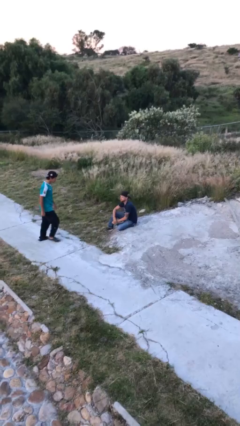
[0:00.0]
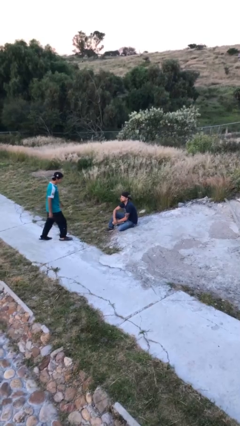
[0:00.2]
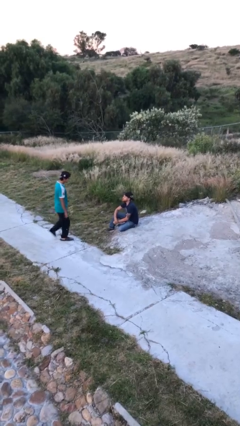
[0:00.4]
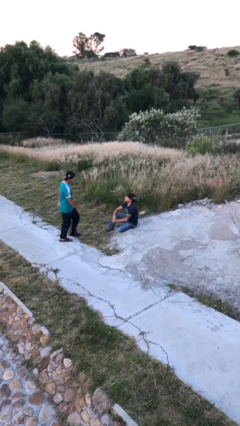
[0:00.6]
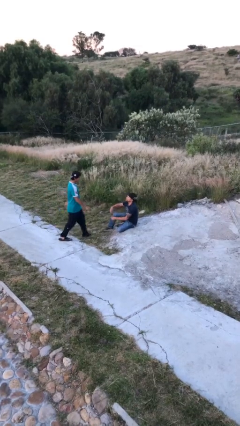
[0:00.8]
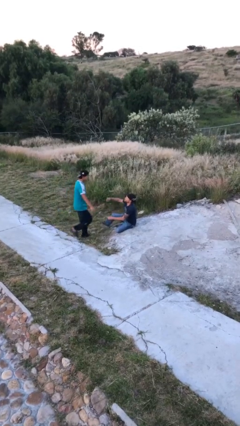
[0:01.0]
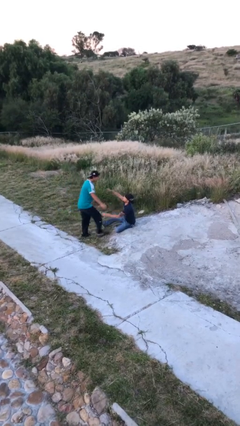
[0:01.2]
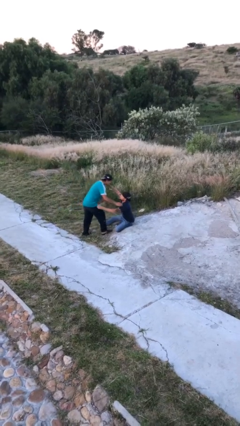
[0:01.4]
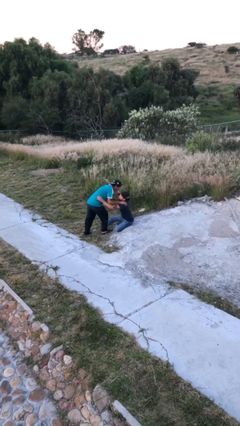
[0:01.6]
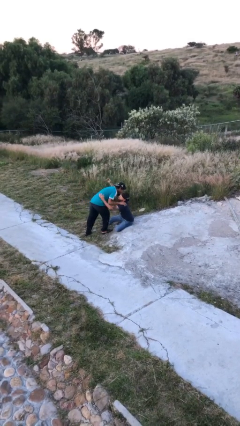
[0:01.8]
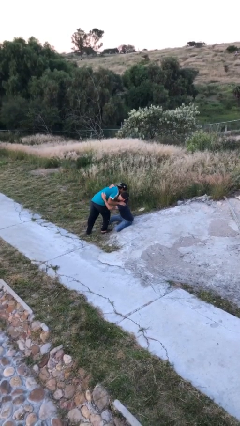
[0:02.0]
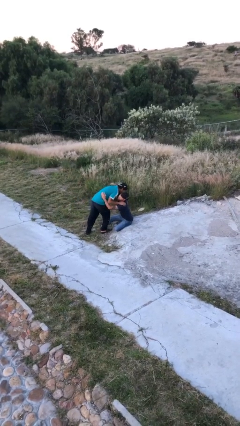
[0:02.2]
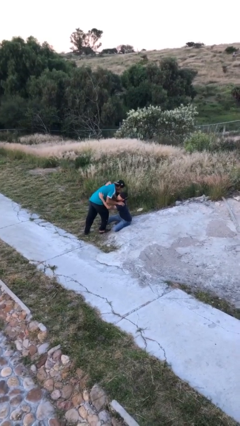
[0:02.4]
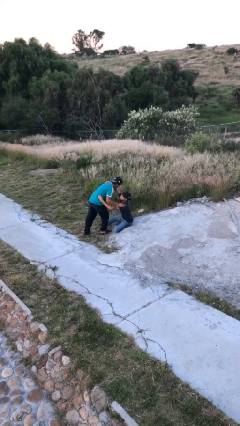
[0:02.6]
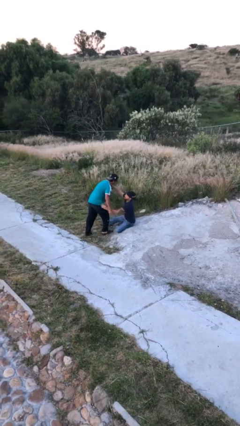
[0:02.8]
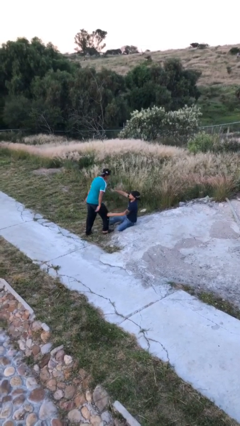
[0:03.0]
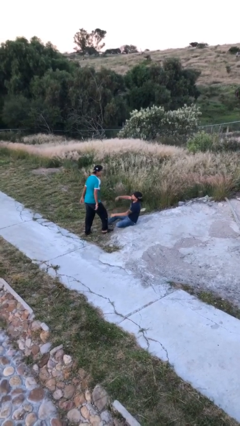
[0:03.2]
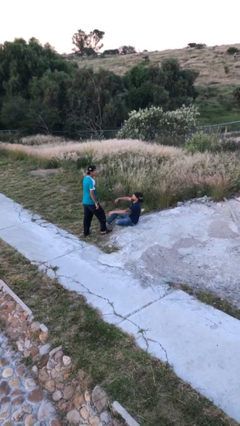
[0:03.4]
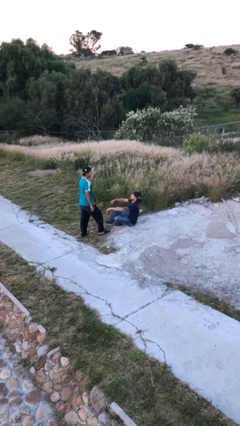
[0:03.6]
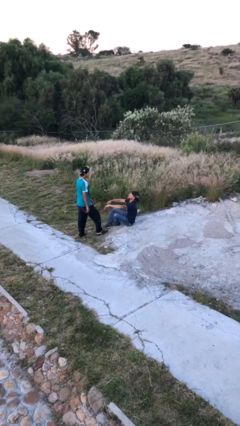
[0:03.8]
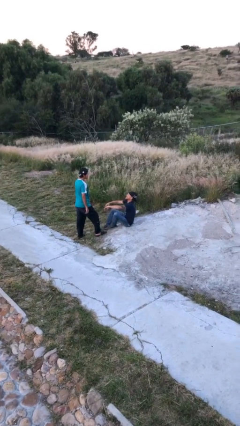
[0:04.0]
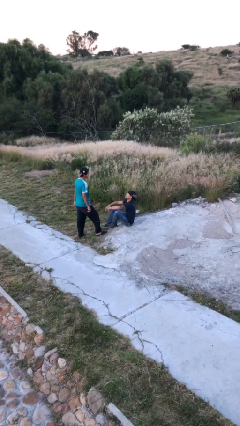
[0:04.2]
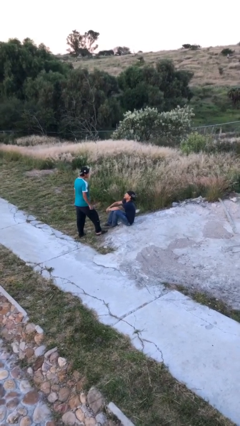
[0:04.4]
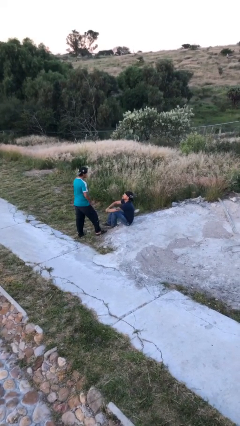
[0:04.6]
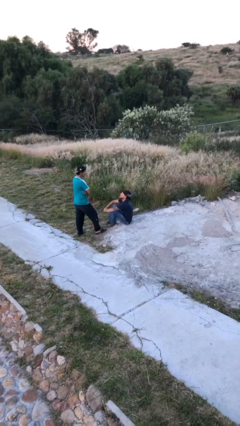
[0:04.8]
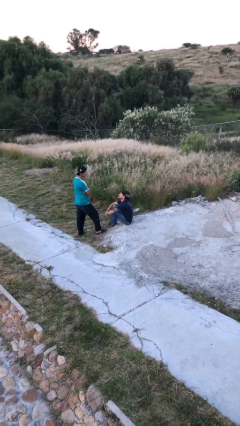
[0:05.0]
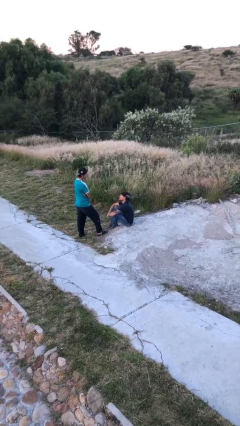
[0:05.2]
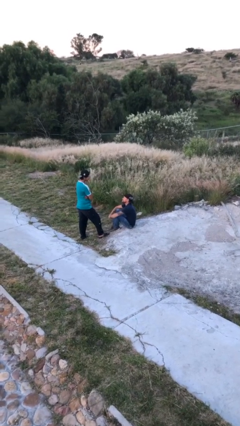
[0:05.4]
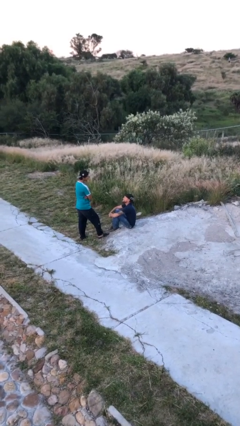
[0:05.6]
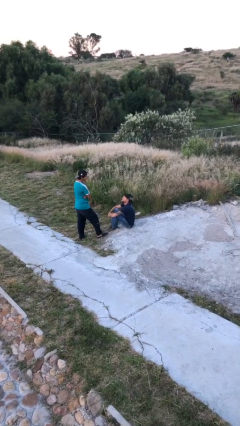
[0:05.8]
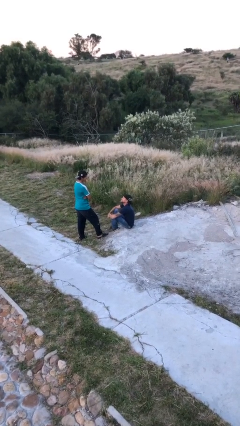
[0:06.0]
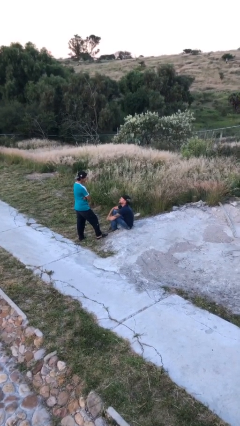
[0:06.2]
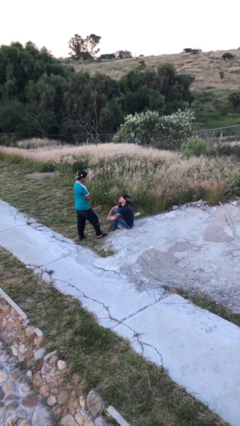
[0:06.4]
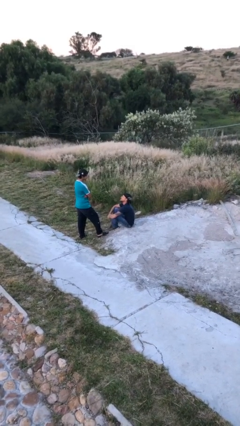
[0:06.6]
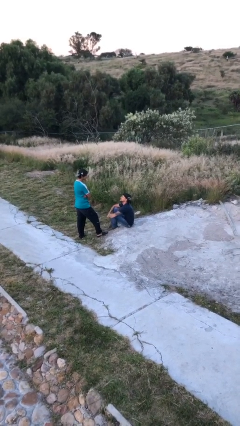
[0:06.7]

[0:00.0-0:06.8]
person embraces person

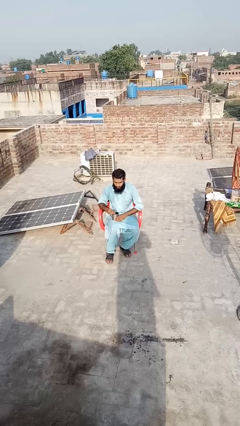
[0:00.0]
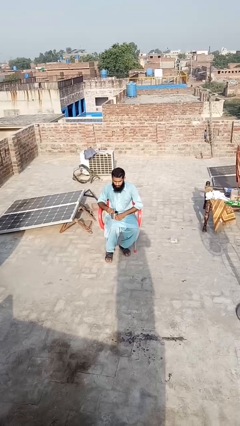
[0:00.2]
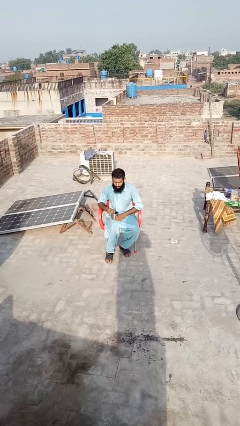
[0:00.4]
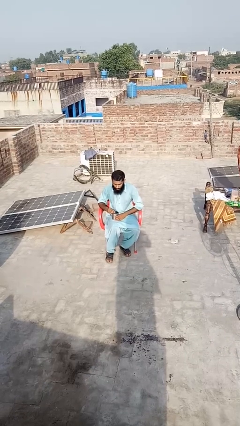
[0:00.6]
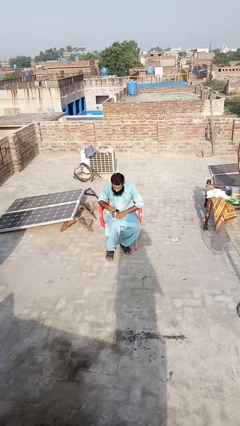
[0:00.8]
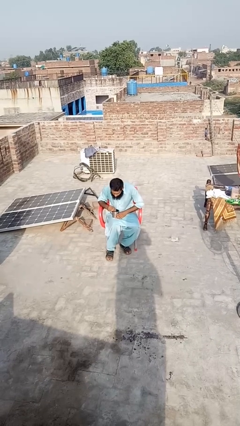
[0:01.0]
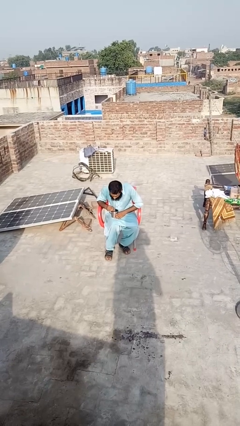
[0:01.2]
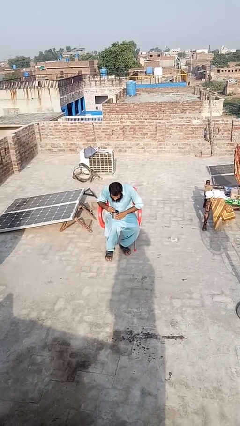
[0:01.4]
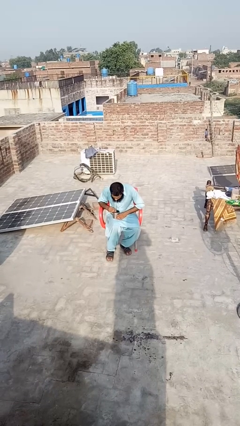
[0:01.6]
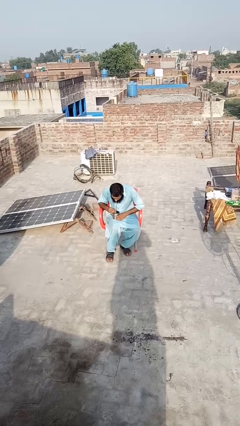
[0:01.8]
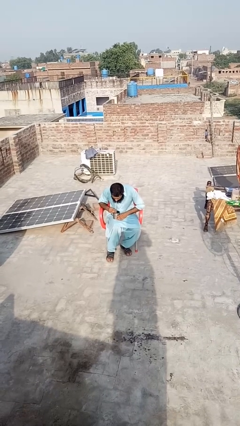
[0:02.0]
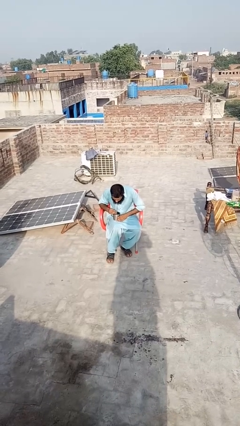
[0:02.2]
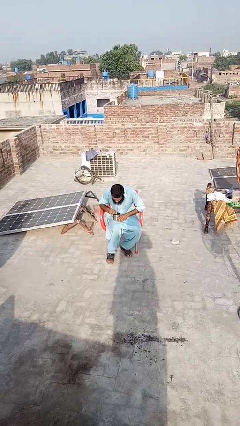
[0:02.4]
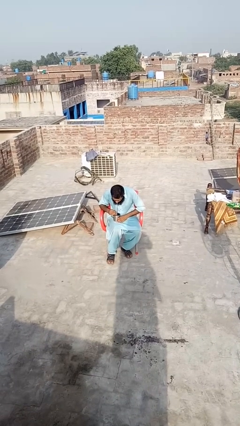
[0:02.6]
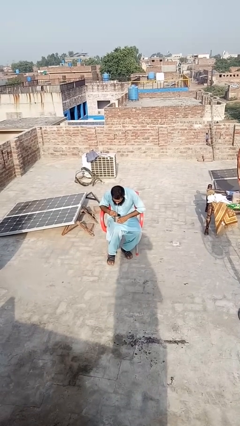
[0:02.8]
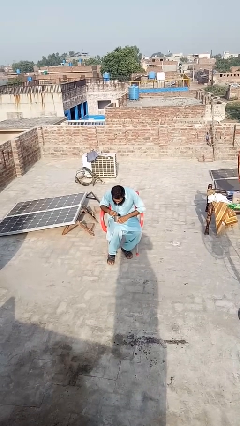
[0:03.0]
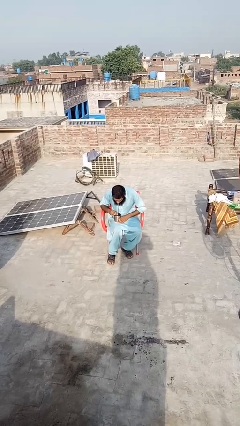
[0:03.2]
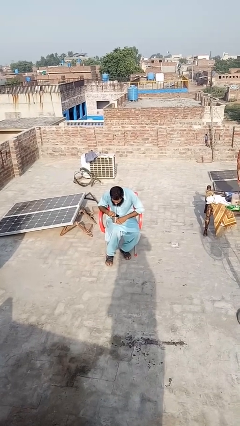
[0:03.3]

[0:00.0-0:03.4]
person drinks from straw

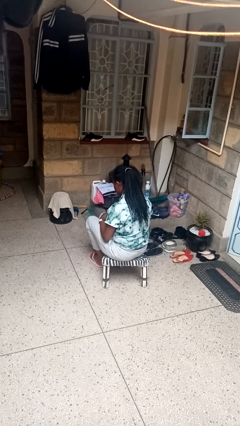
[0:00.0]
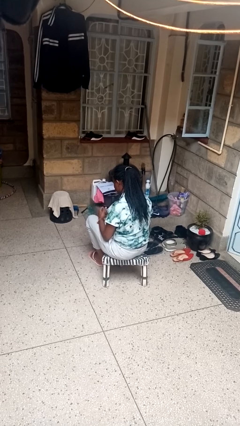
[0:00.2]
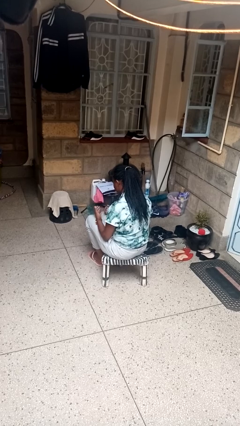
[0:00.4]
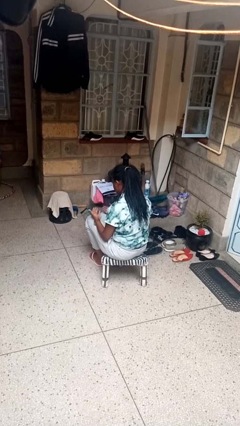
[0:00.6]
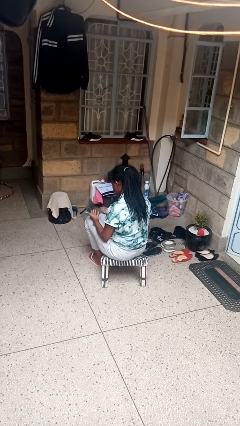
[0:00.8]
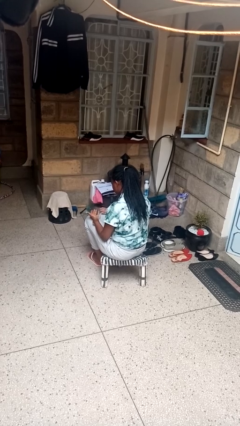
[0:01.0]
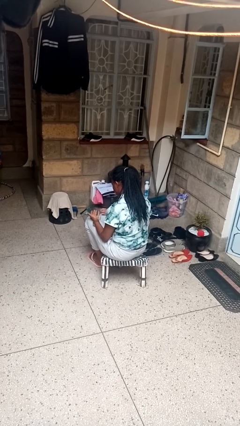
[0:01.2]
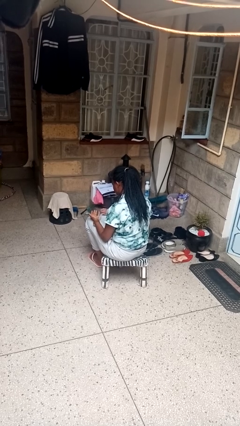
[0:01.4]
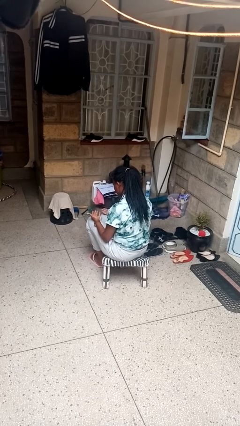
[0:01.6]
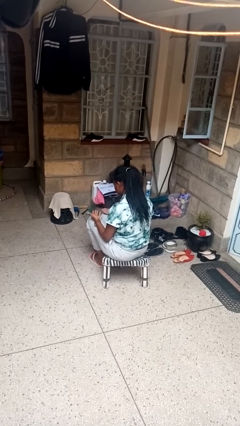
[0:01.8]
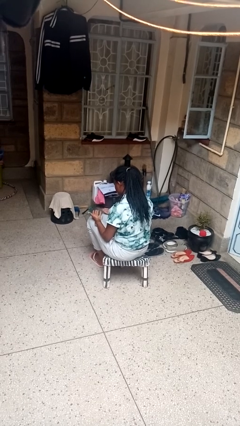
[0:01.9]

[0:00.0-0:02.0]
person looks at hands in lap

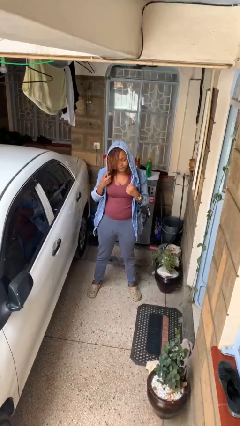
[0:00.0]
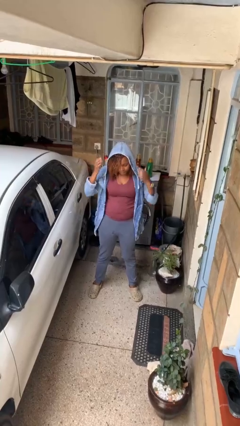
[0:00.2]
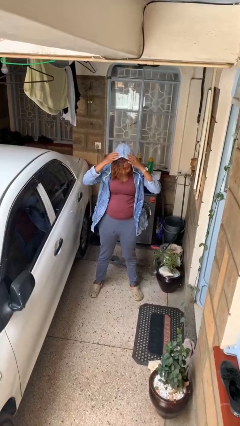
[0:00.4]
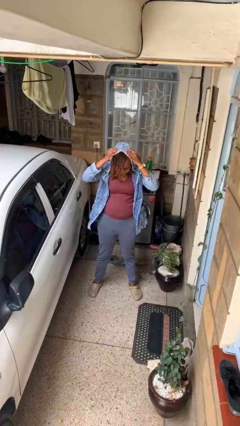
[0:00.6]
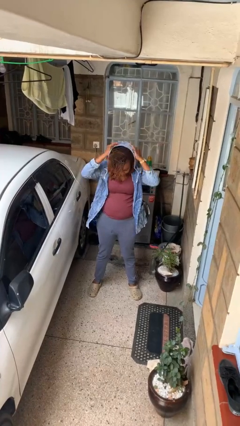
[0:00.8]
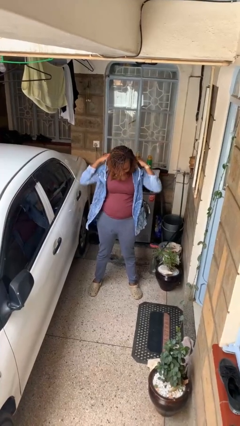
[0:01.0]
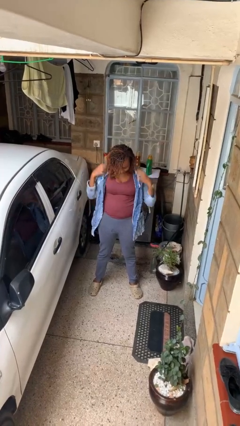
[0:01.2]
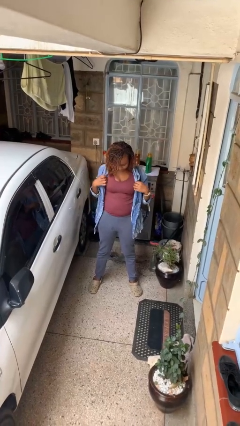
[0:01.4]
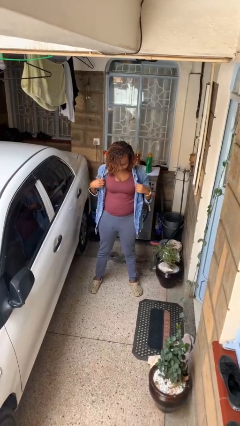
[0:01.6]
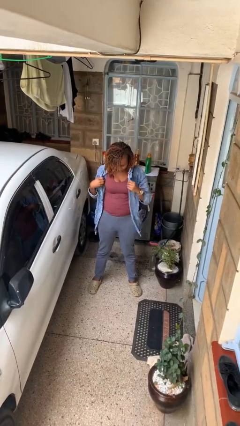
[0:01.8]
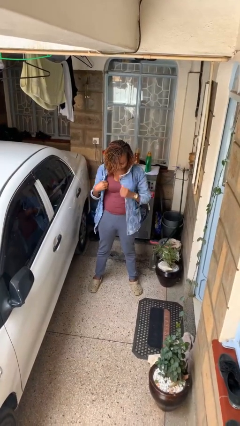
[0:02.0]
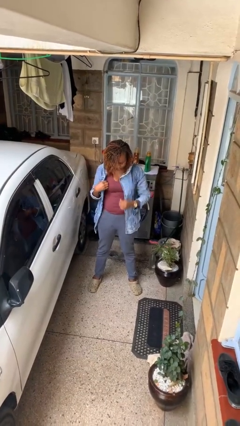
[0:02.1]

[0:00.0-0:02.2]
person takes off hoodie

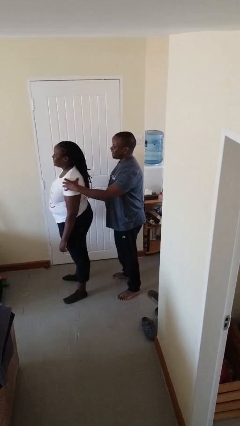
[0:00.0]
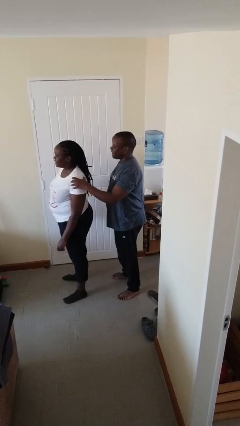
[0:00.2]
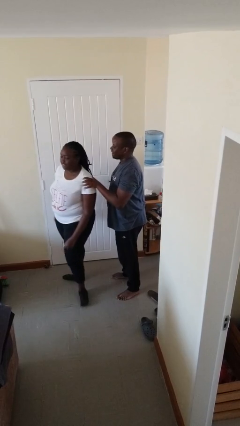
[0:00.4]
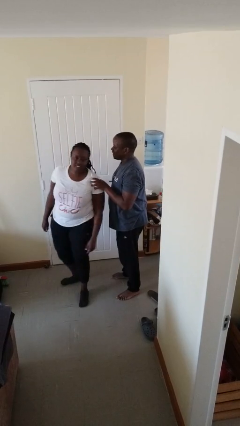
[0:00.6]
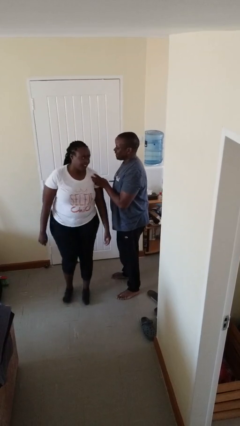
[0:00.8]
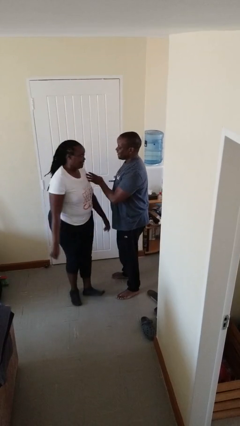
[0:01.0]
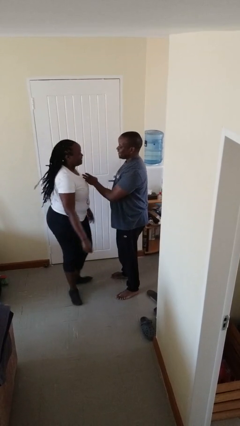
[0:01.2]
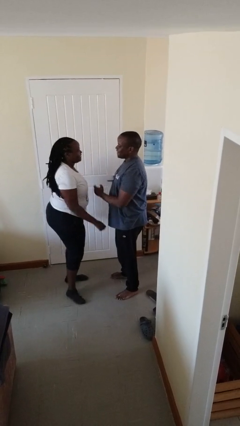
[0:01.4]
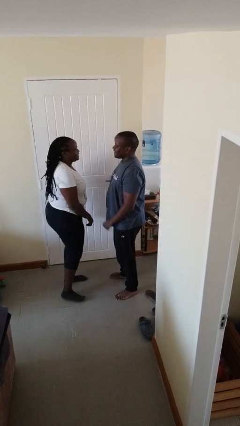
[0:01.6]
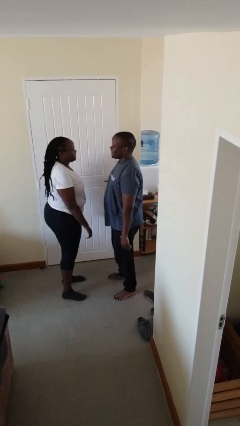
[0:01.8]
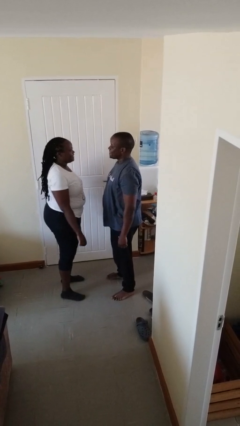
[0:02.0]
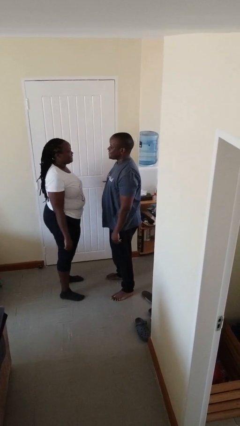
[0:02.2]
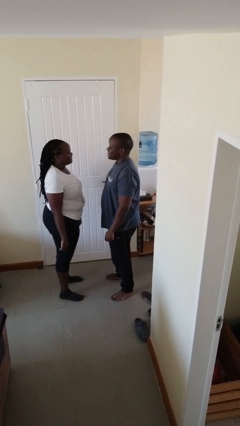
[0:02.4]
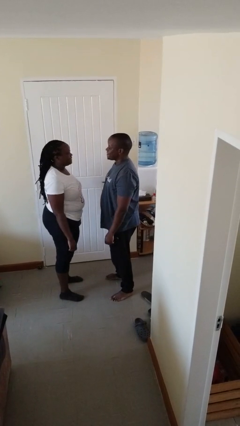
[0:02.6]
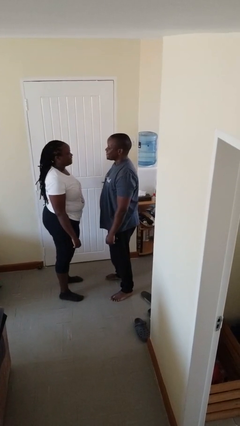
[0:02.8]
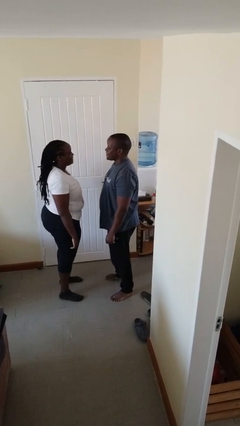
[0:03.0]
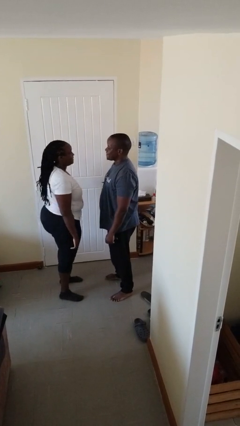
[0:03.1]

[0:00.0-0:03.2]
person spins person around
